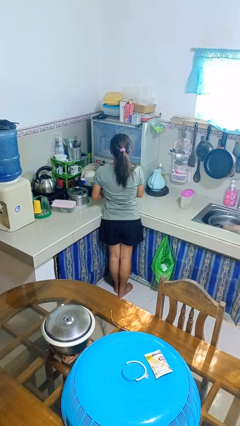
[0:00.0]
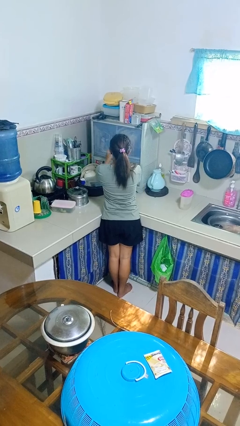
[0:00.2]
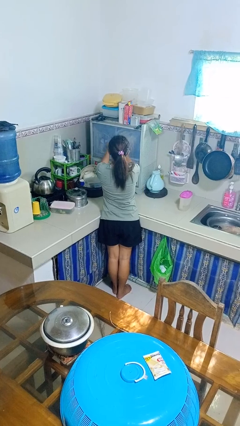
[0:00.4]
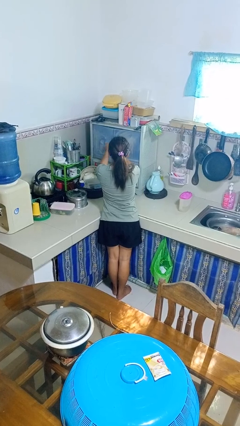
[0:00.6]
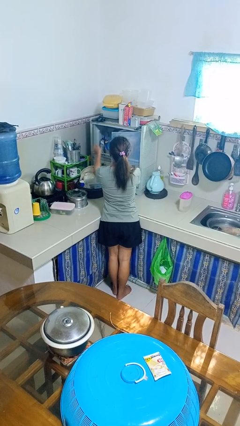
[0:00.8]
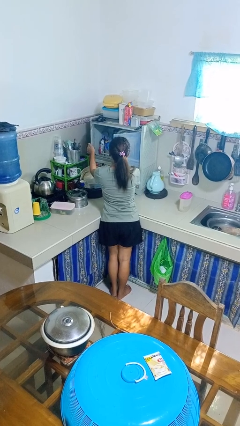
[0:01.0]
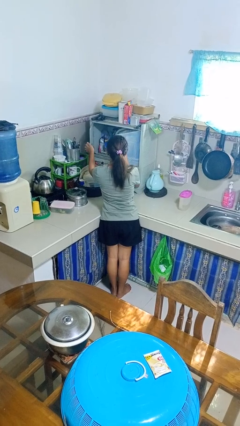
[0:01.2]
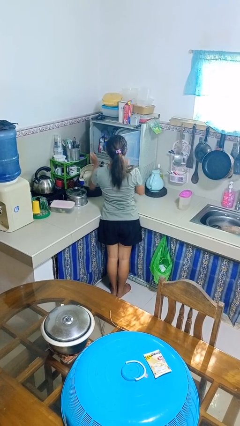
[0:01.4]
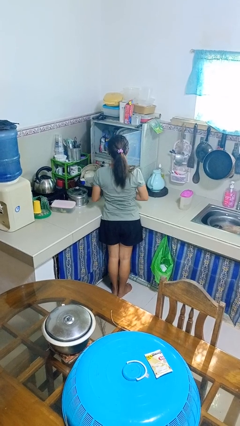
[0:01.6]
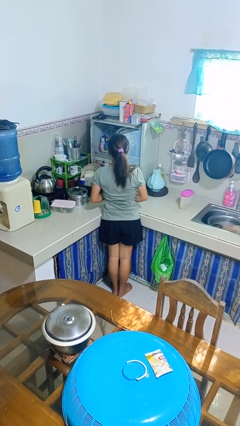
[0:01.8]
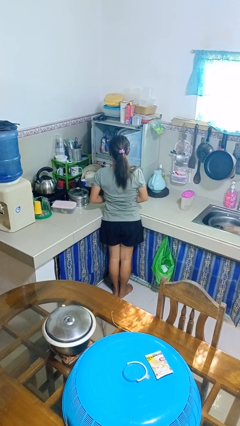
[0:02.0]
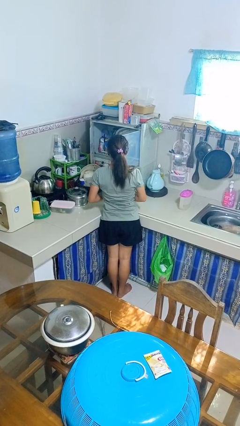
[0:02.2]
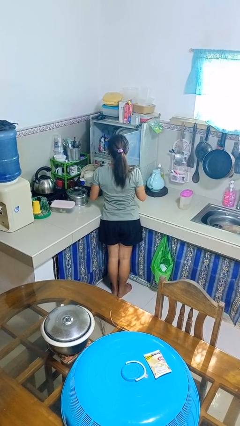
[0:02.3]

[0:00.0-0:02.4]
person opens kitchen drawer

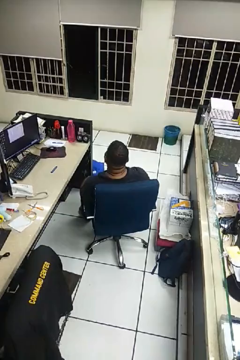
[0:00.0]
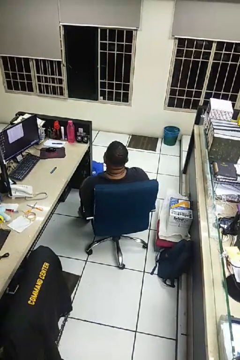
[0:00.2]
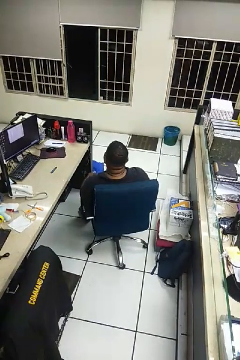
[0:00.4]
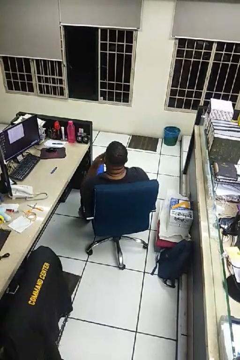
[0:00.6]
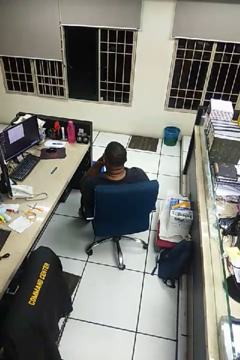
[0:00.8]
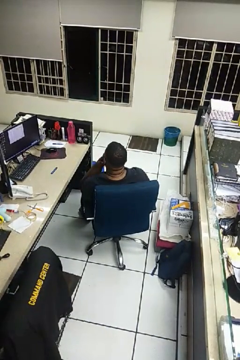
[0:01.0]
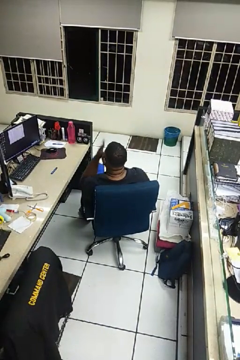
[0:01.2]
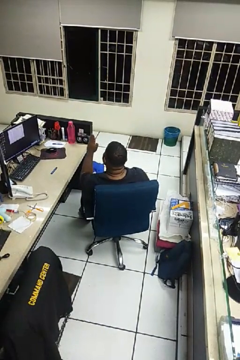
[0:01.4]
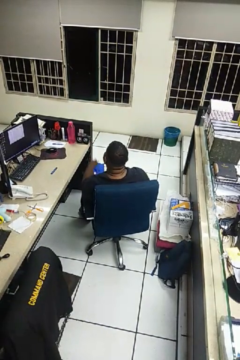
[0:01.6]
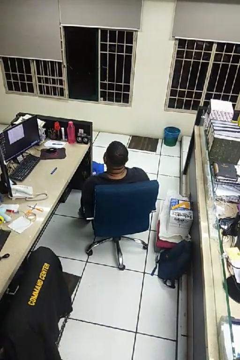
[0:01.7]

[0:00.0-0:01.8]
person gestures blow kiss

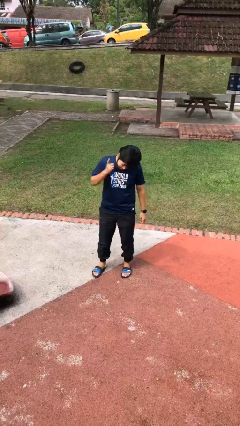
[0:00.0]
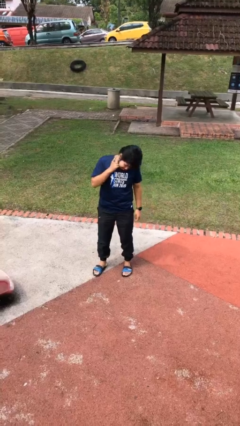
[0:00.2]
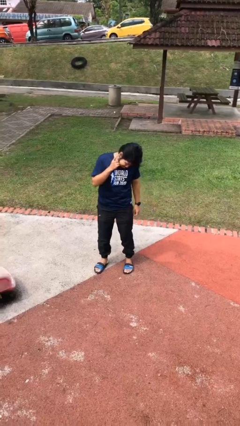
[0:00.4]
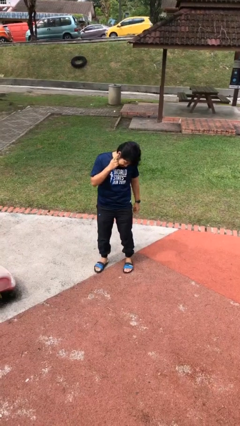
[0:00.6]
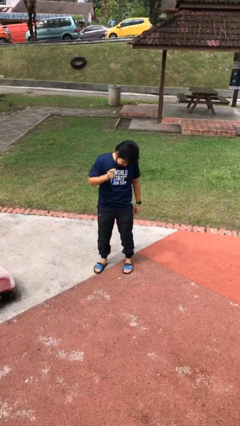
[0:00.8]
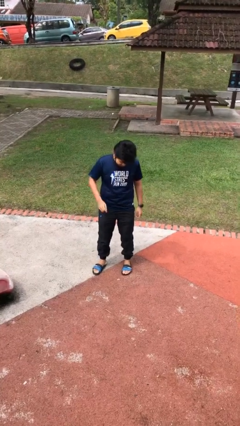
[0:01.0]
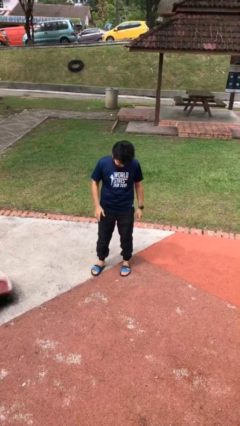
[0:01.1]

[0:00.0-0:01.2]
person gestures listen closely

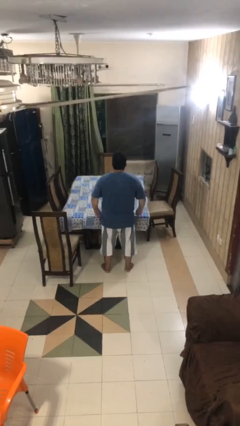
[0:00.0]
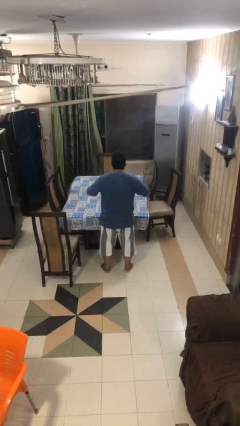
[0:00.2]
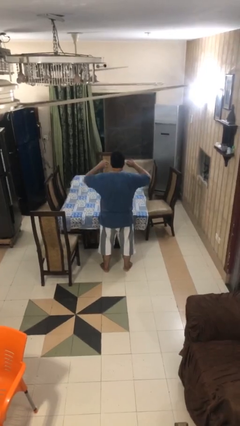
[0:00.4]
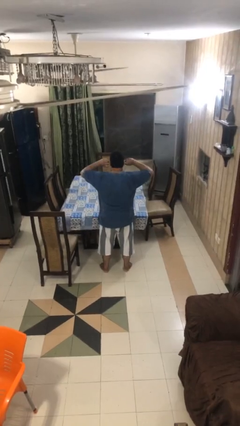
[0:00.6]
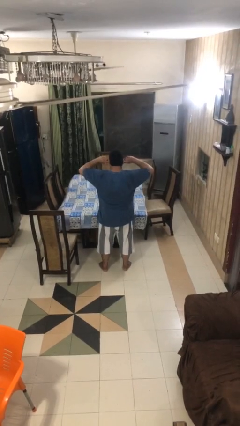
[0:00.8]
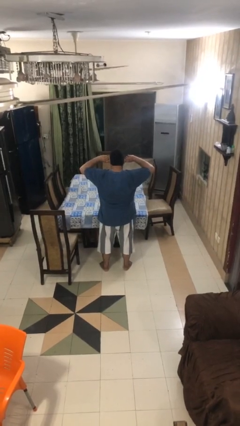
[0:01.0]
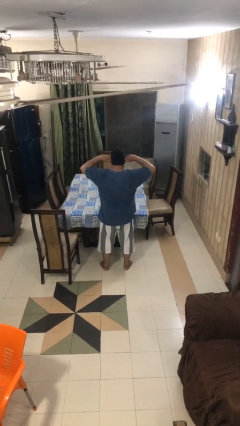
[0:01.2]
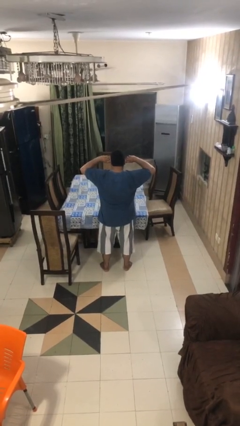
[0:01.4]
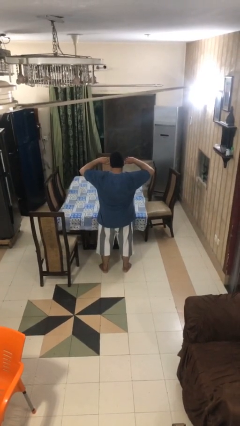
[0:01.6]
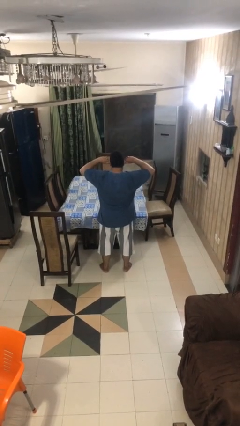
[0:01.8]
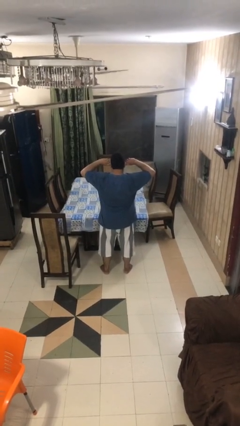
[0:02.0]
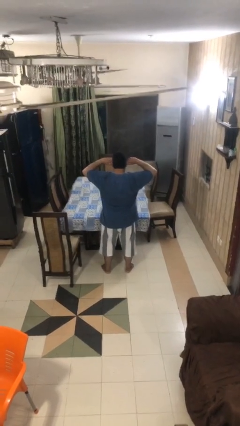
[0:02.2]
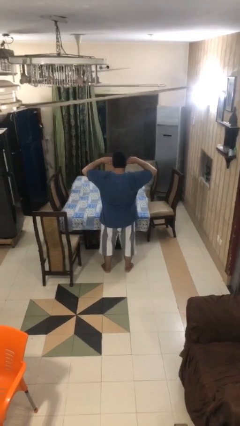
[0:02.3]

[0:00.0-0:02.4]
person puts fingers in ear

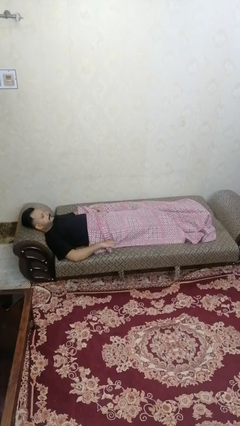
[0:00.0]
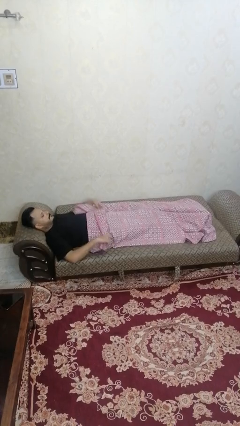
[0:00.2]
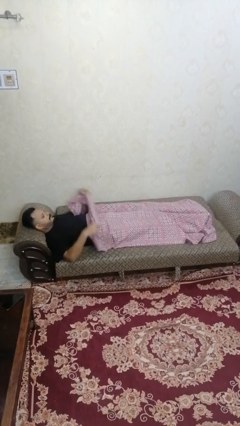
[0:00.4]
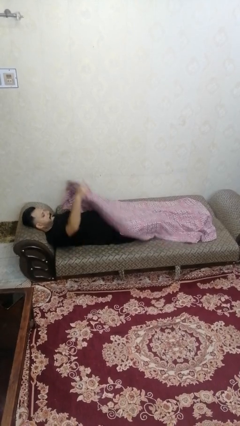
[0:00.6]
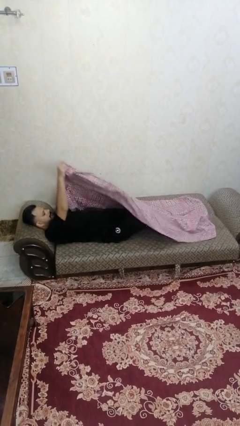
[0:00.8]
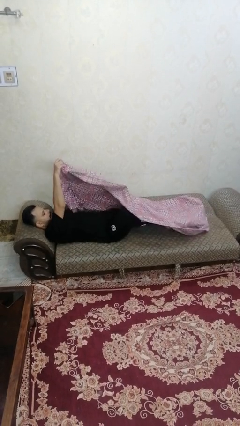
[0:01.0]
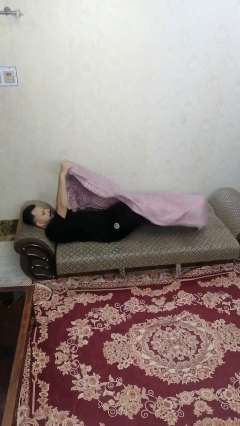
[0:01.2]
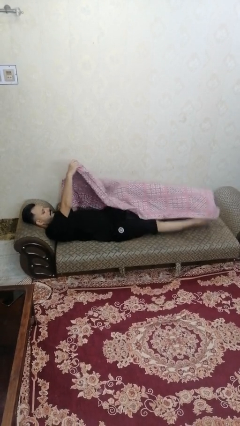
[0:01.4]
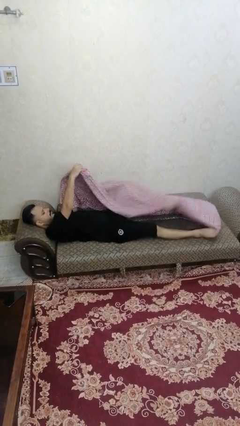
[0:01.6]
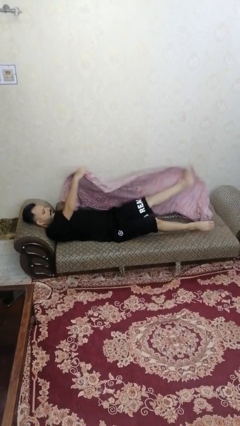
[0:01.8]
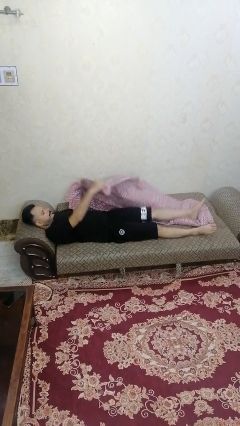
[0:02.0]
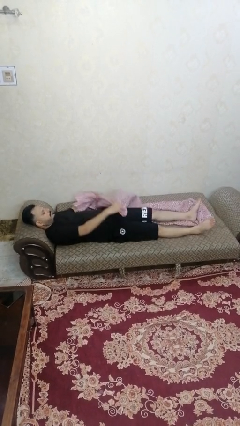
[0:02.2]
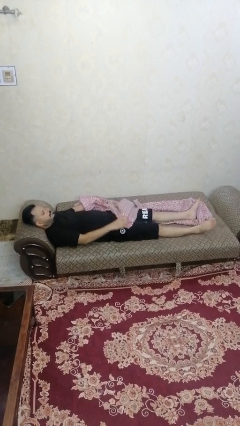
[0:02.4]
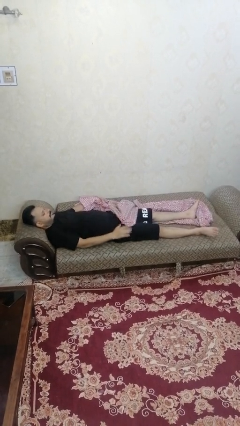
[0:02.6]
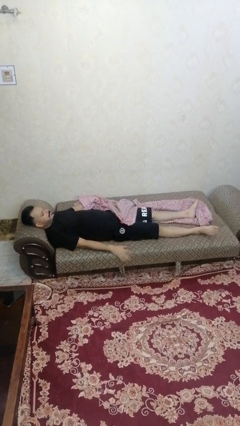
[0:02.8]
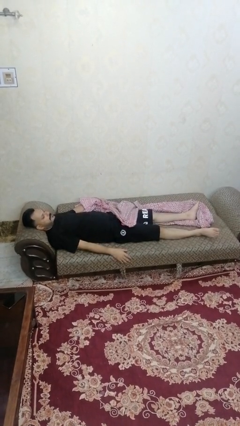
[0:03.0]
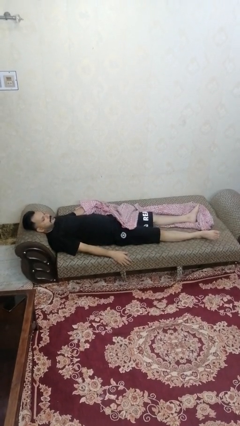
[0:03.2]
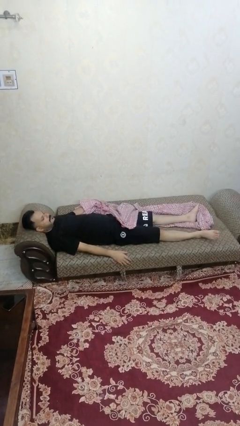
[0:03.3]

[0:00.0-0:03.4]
person uncovers with bedsheets

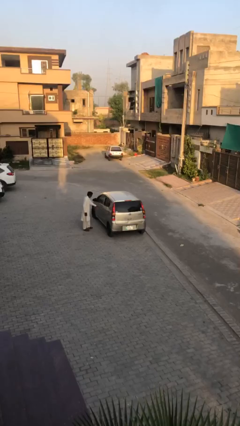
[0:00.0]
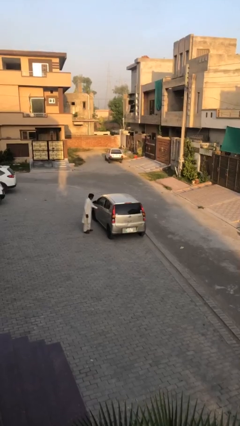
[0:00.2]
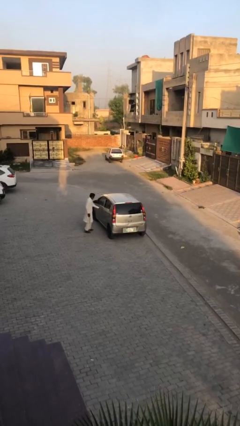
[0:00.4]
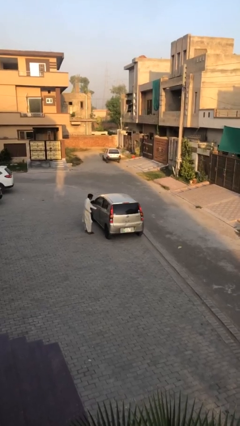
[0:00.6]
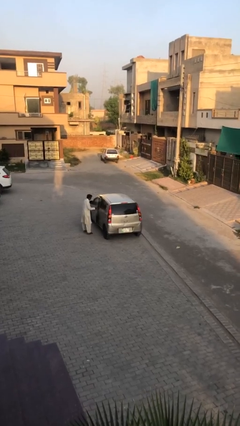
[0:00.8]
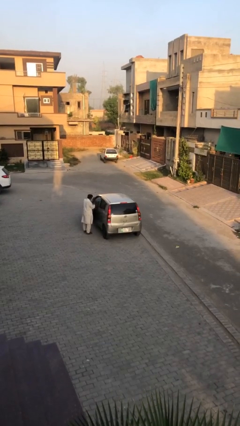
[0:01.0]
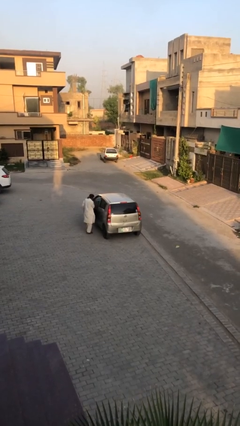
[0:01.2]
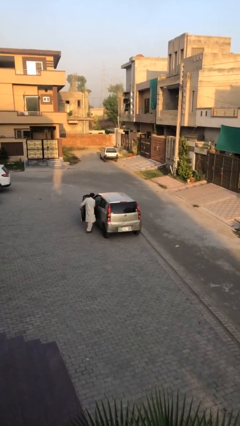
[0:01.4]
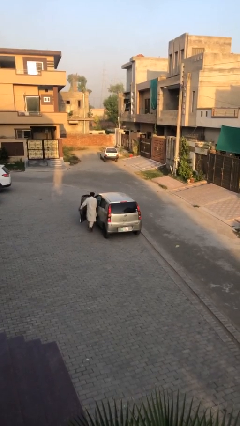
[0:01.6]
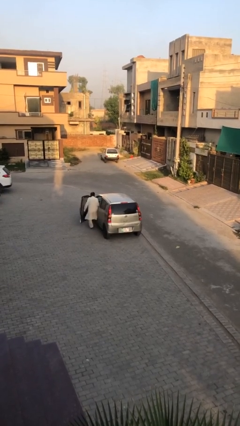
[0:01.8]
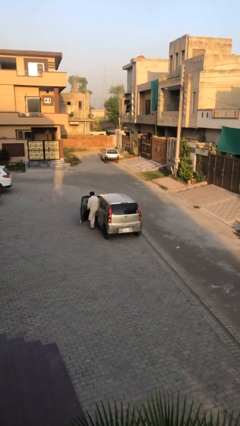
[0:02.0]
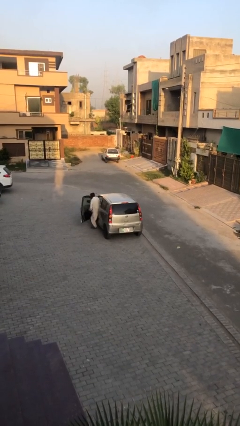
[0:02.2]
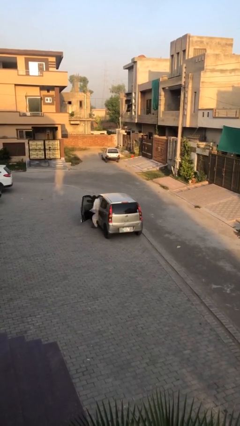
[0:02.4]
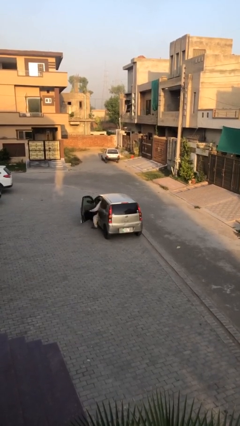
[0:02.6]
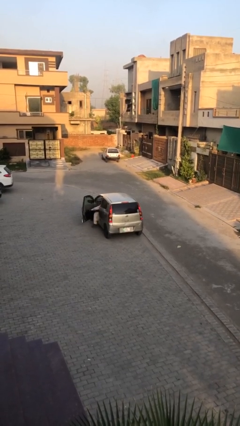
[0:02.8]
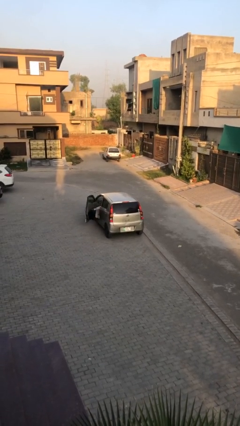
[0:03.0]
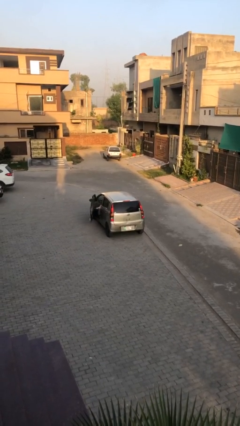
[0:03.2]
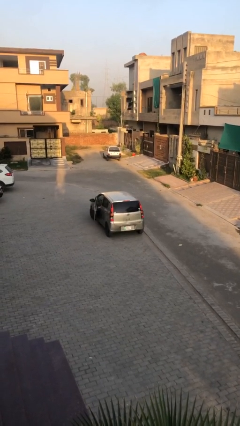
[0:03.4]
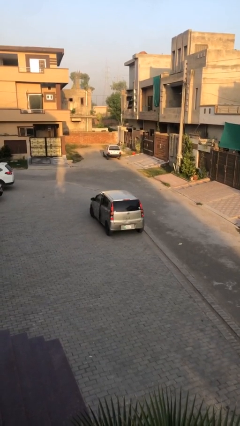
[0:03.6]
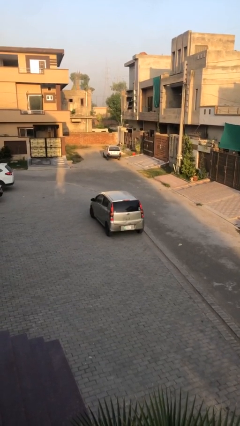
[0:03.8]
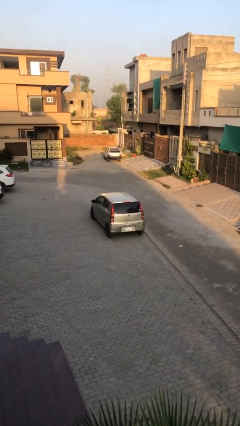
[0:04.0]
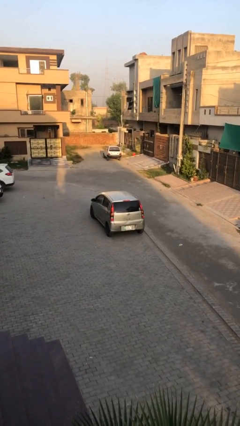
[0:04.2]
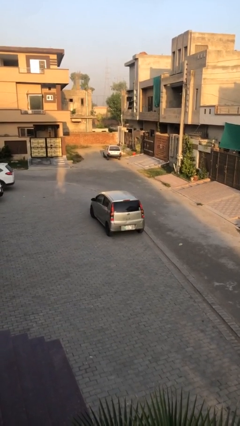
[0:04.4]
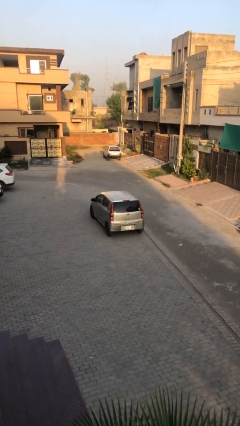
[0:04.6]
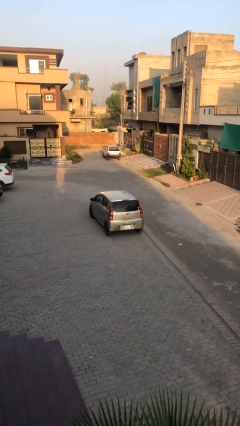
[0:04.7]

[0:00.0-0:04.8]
car picks up person

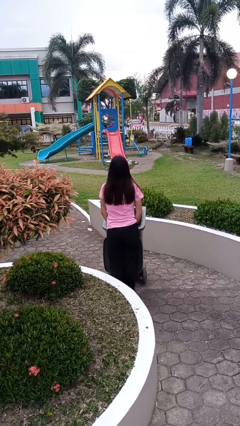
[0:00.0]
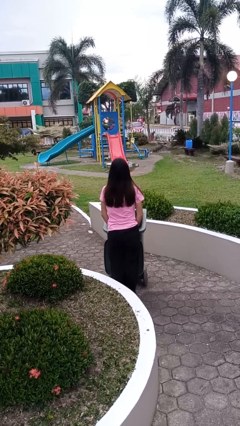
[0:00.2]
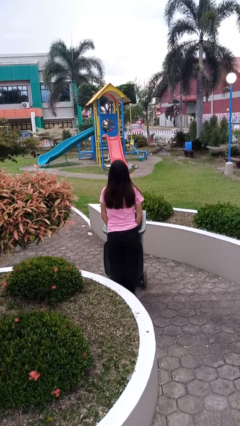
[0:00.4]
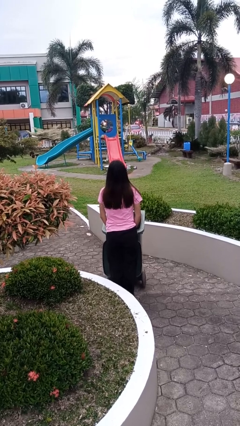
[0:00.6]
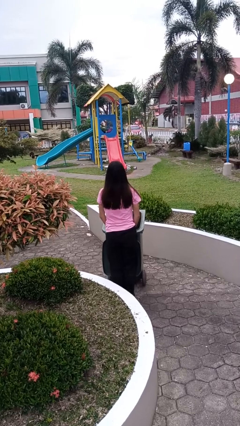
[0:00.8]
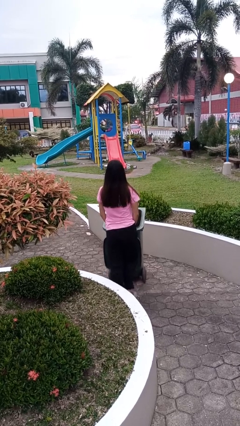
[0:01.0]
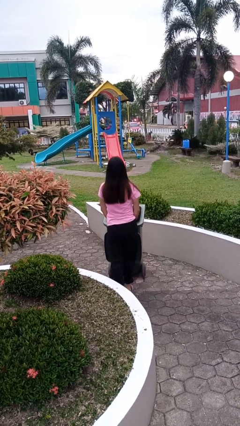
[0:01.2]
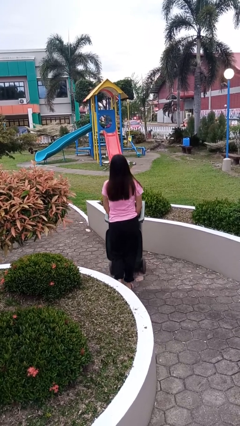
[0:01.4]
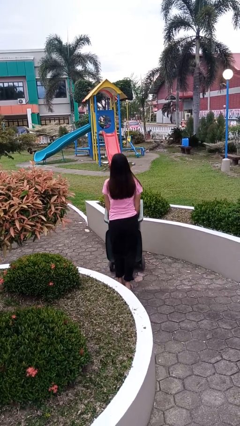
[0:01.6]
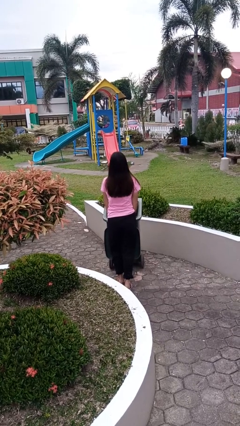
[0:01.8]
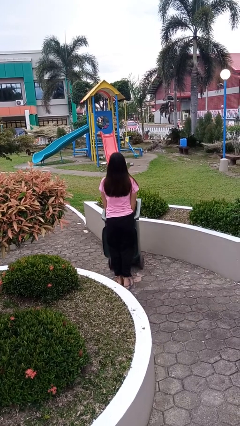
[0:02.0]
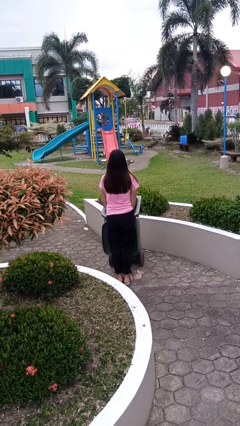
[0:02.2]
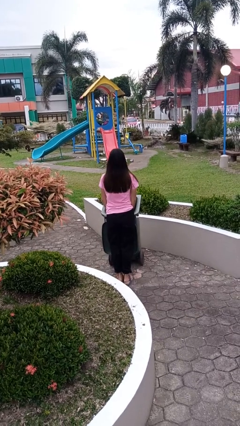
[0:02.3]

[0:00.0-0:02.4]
person pushes wheeled trashcan
